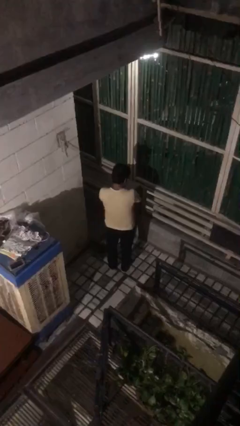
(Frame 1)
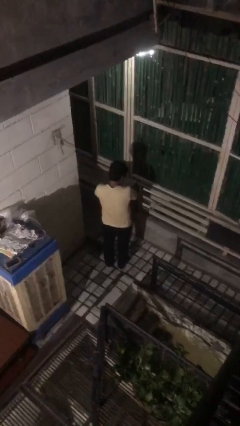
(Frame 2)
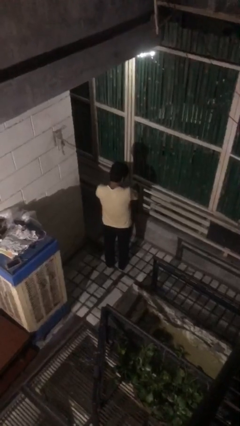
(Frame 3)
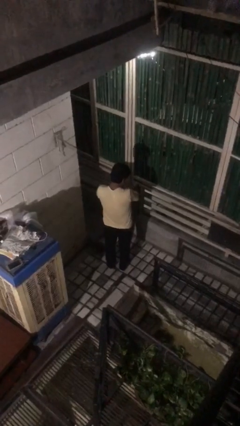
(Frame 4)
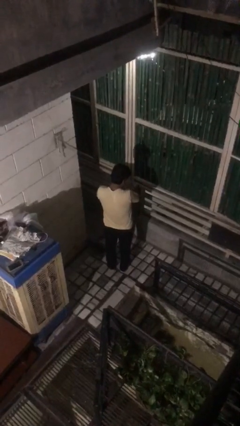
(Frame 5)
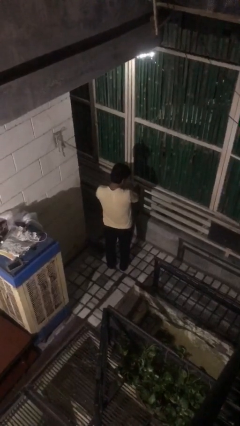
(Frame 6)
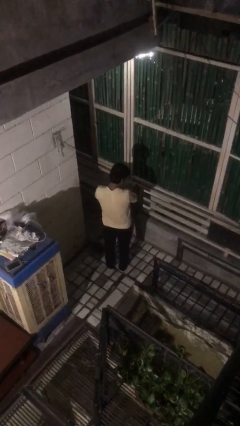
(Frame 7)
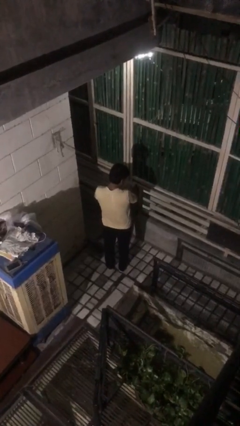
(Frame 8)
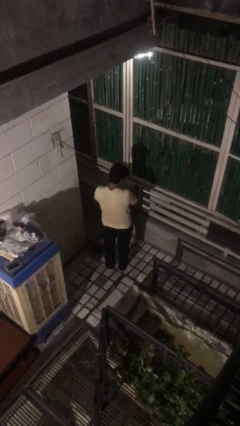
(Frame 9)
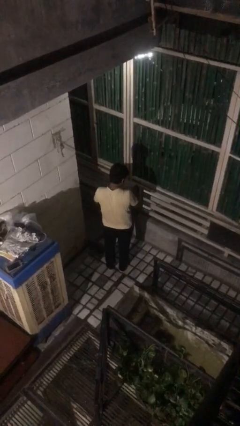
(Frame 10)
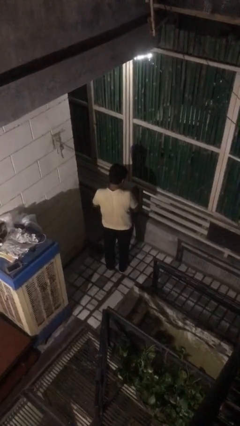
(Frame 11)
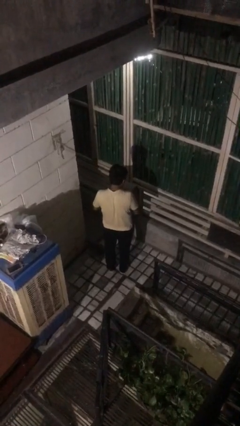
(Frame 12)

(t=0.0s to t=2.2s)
person swats bug

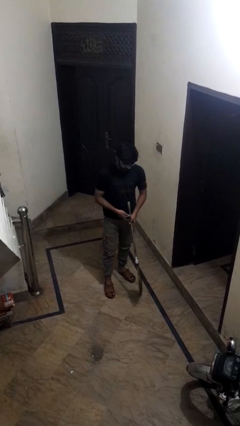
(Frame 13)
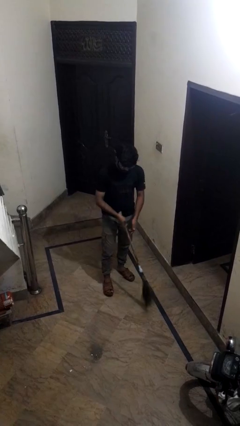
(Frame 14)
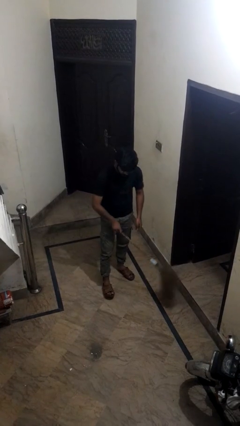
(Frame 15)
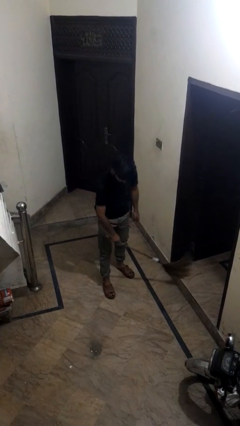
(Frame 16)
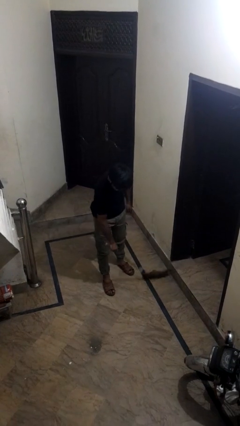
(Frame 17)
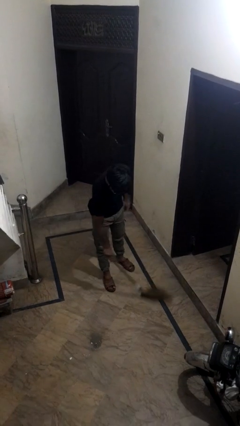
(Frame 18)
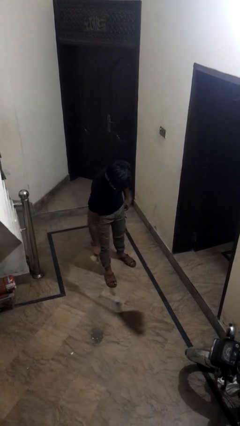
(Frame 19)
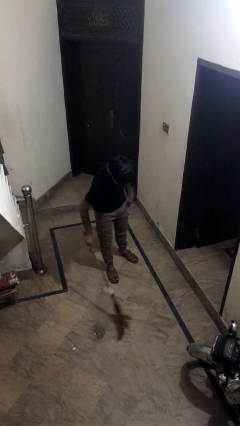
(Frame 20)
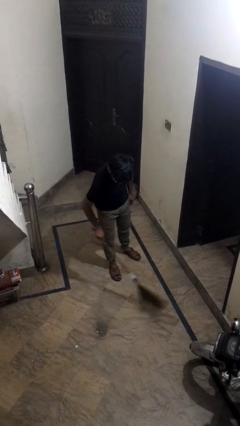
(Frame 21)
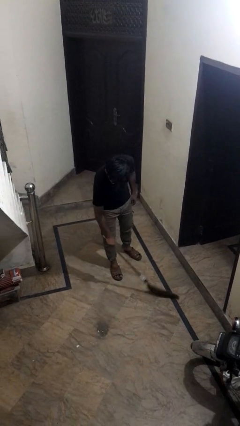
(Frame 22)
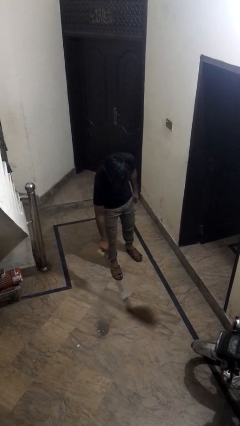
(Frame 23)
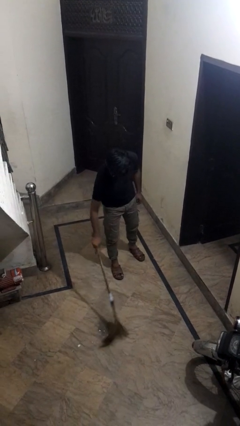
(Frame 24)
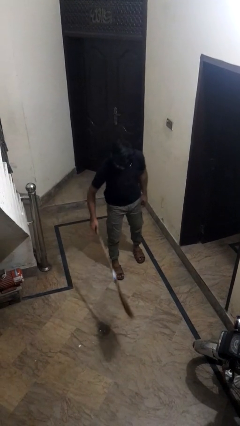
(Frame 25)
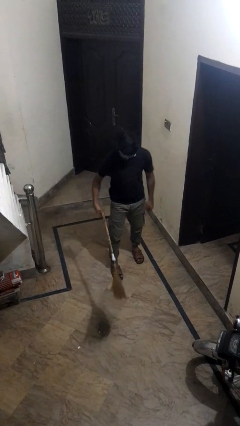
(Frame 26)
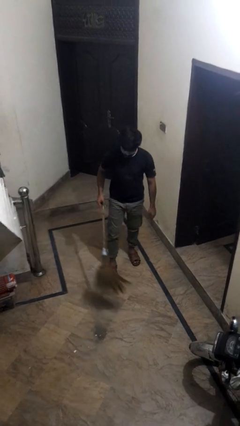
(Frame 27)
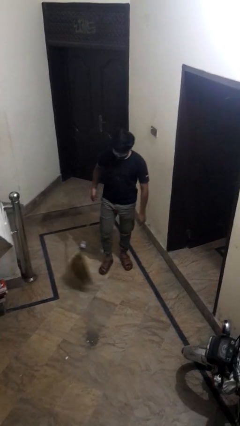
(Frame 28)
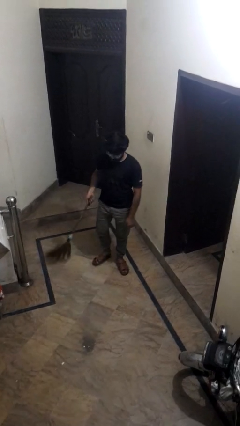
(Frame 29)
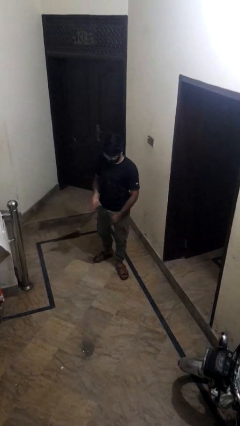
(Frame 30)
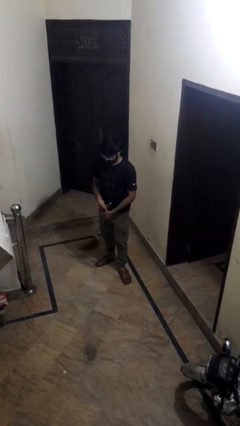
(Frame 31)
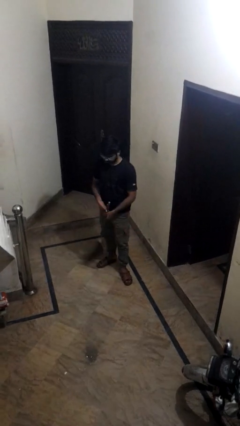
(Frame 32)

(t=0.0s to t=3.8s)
person sweeps floor

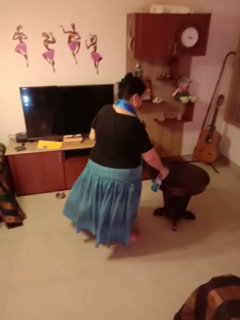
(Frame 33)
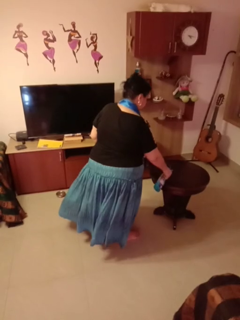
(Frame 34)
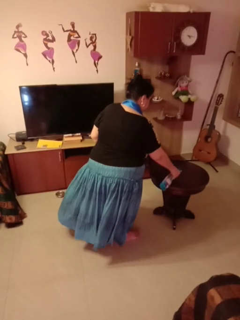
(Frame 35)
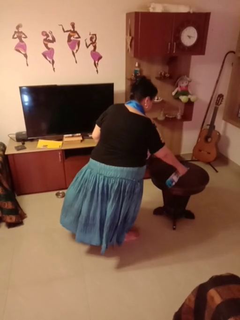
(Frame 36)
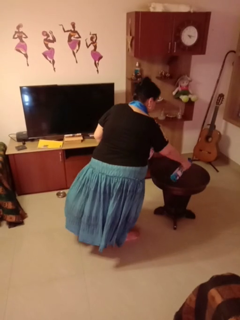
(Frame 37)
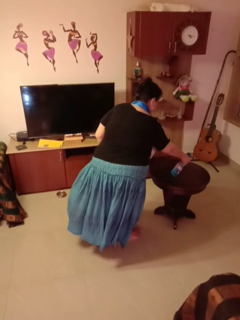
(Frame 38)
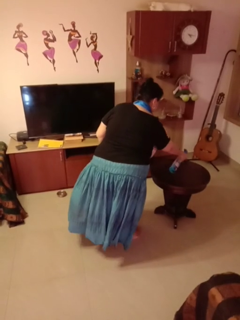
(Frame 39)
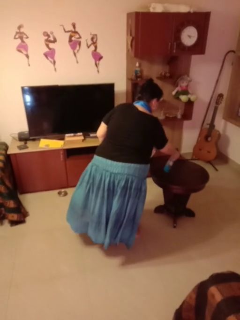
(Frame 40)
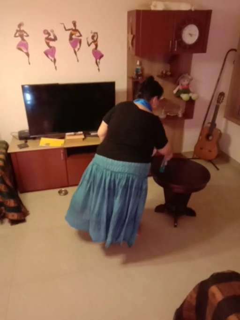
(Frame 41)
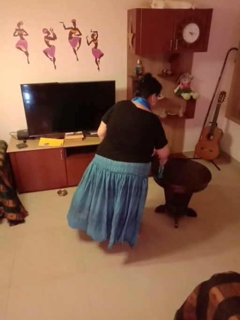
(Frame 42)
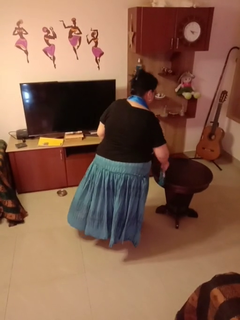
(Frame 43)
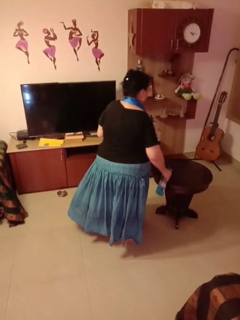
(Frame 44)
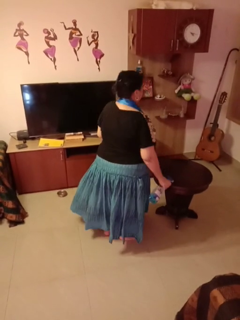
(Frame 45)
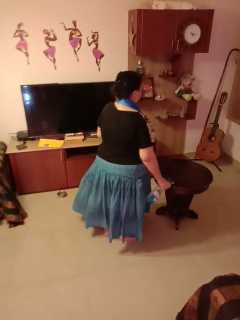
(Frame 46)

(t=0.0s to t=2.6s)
person sprays from bottle

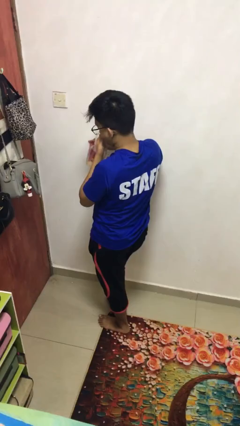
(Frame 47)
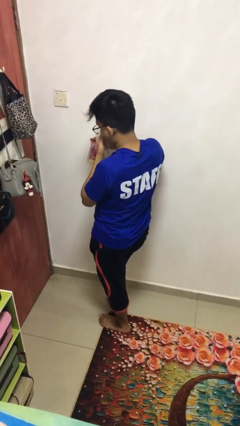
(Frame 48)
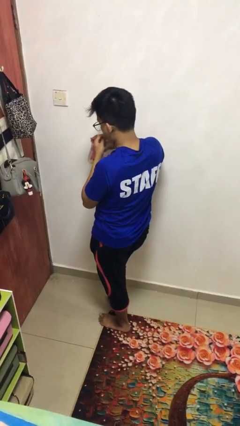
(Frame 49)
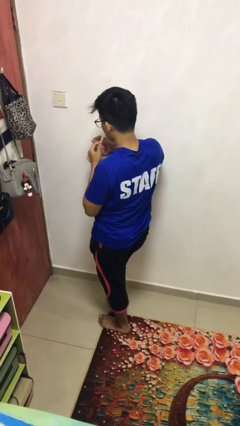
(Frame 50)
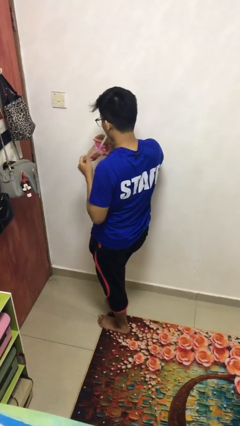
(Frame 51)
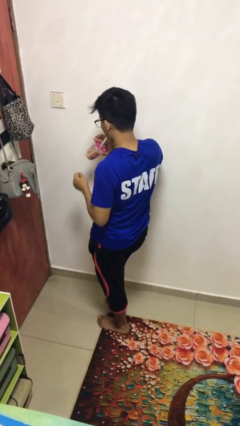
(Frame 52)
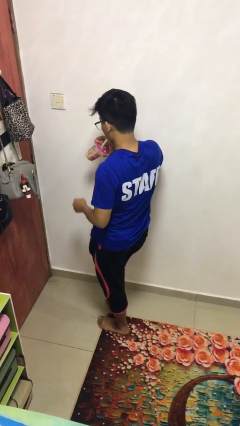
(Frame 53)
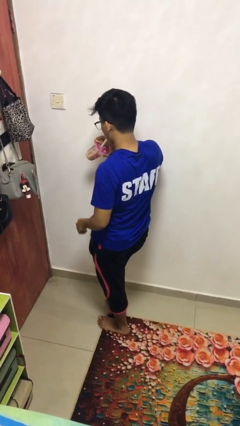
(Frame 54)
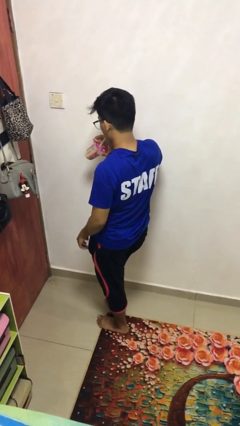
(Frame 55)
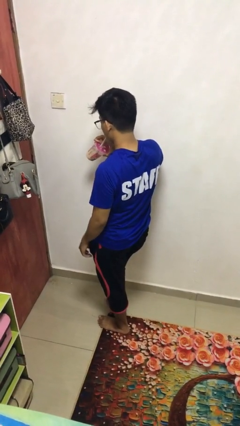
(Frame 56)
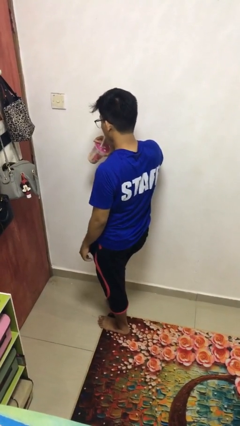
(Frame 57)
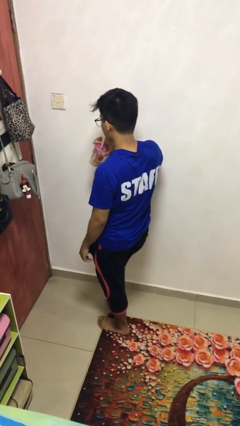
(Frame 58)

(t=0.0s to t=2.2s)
person drinks from straw

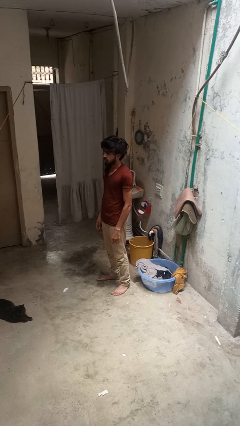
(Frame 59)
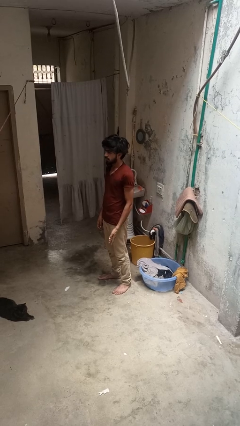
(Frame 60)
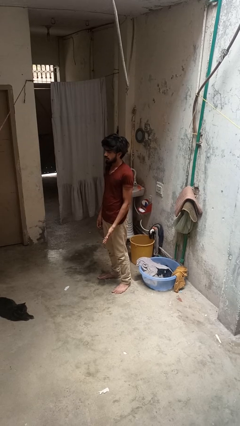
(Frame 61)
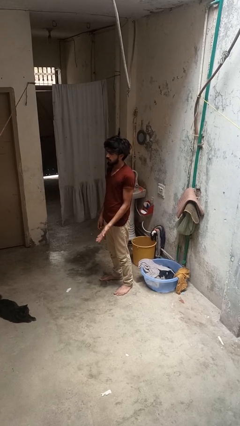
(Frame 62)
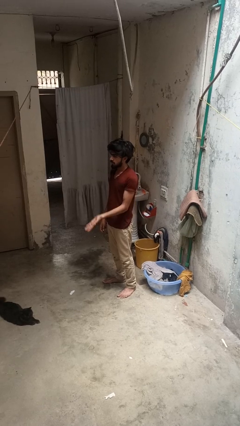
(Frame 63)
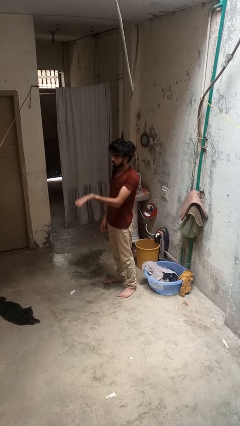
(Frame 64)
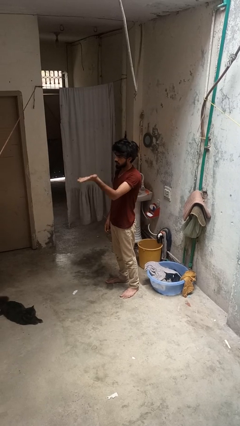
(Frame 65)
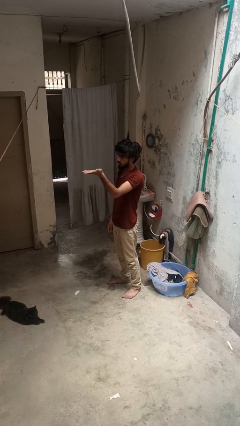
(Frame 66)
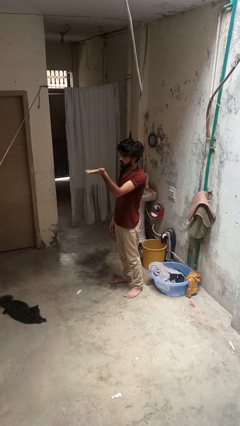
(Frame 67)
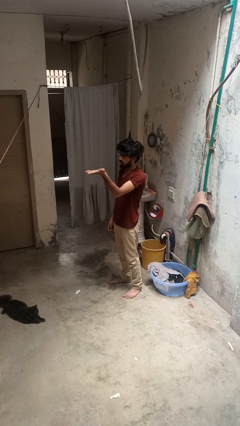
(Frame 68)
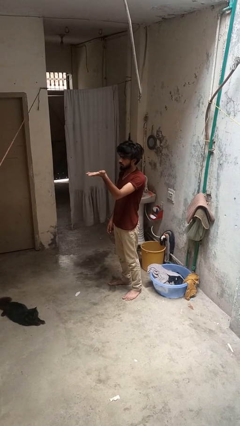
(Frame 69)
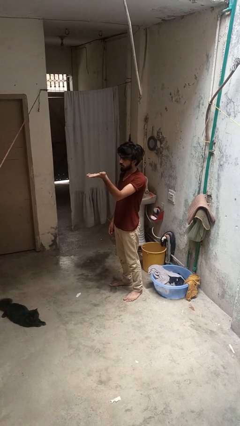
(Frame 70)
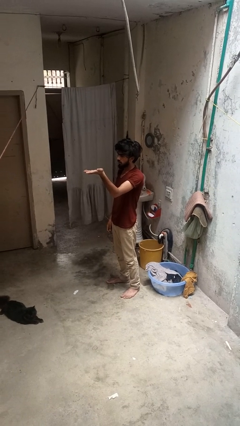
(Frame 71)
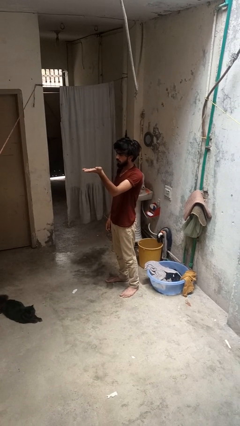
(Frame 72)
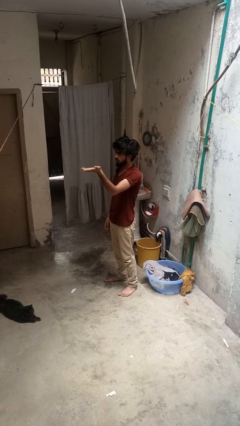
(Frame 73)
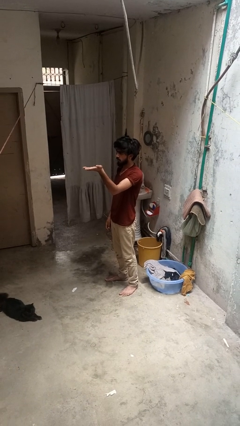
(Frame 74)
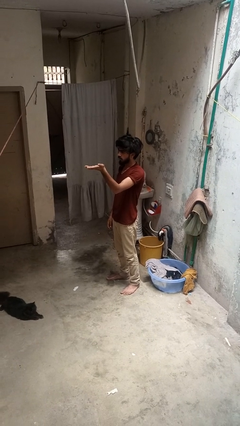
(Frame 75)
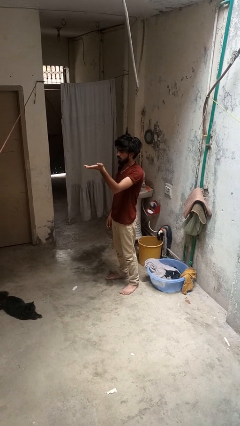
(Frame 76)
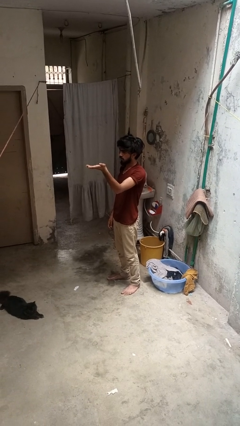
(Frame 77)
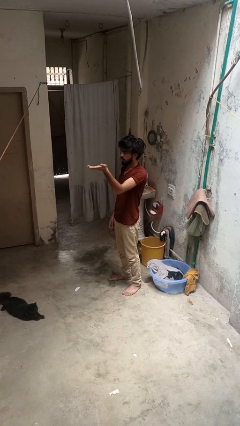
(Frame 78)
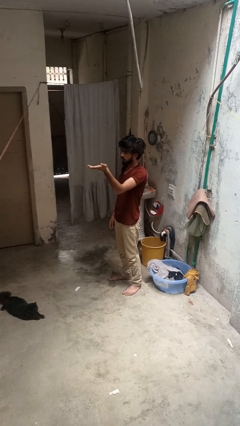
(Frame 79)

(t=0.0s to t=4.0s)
person gestures swipe up

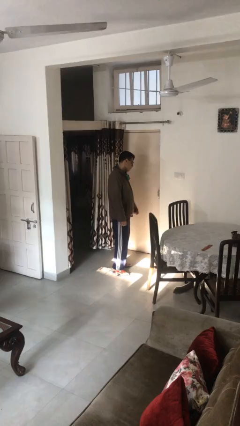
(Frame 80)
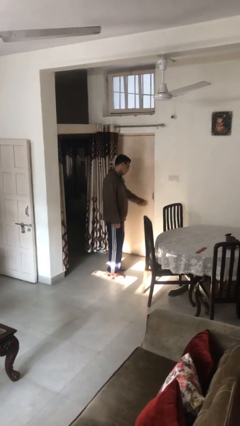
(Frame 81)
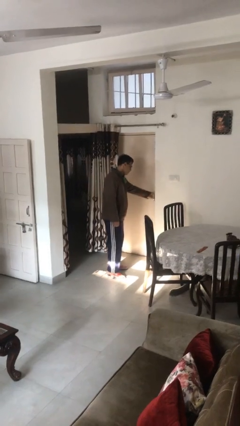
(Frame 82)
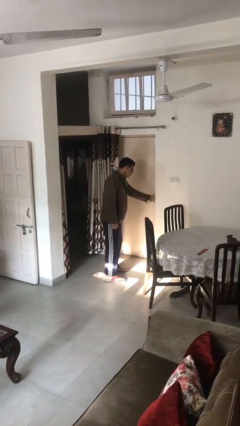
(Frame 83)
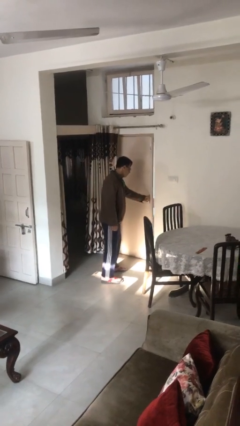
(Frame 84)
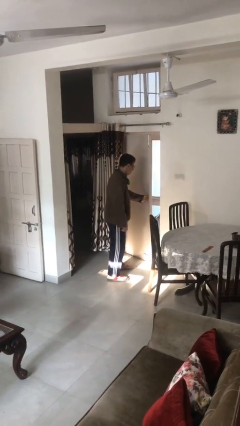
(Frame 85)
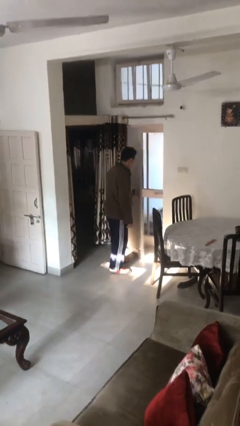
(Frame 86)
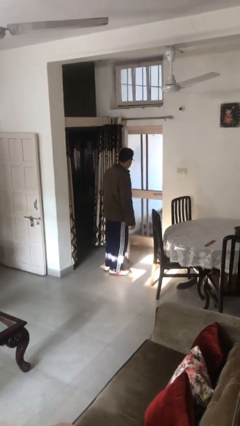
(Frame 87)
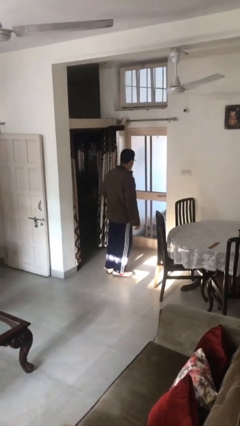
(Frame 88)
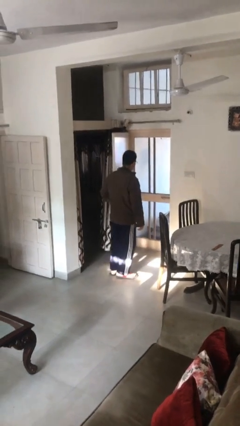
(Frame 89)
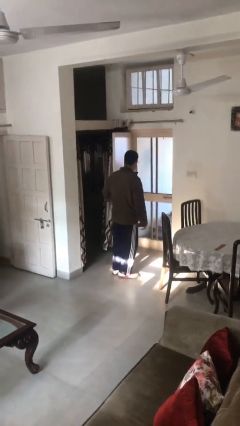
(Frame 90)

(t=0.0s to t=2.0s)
person opens facility door

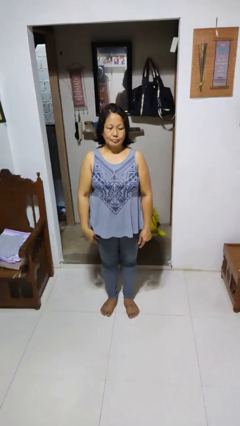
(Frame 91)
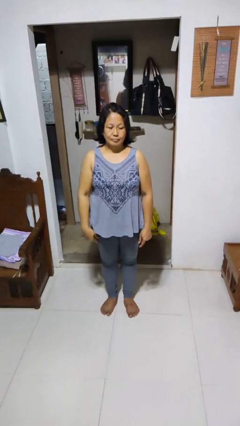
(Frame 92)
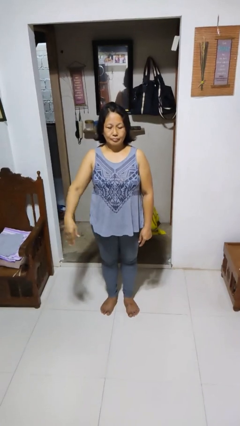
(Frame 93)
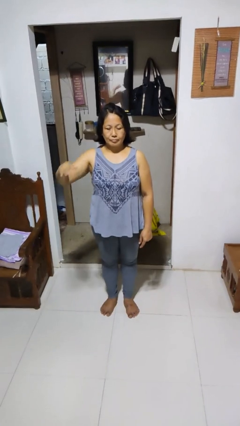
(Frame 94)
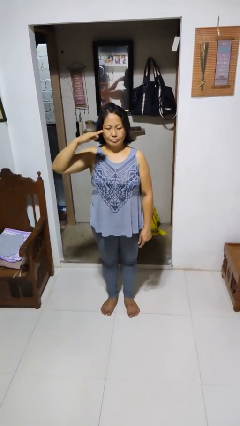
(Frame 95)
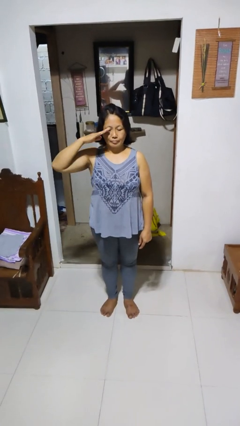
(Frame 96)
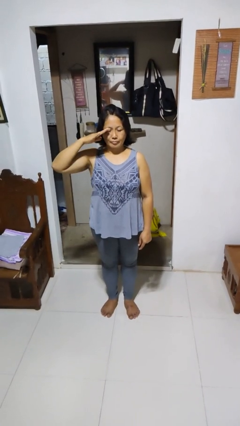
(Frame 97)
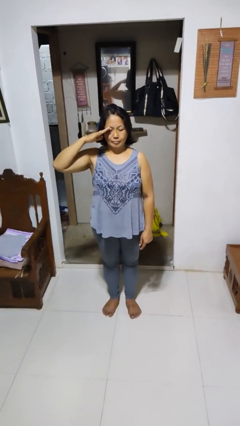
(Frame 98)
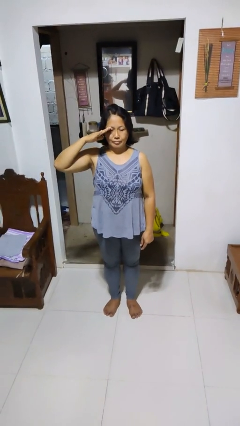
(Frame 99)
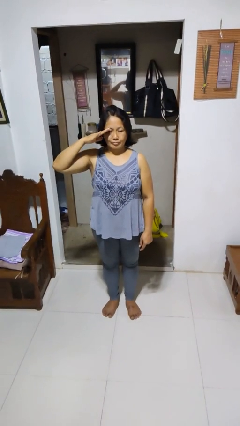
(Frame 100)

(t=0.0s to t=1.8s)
person salutes
